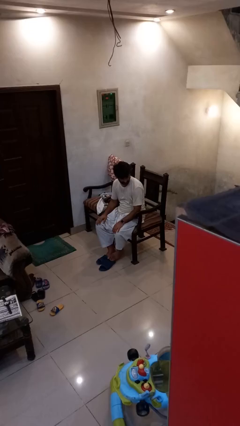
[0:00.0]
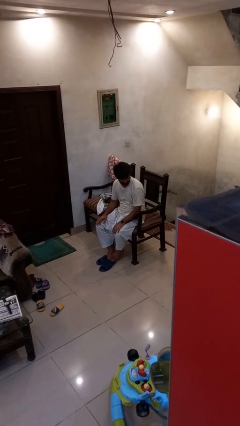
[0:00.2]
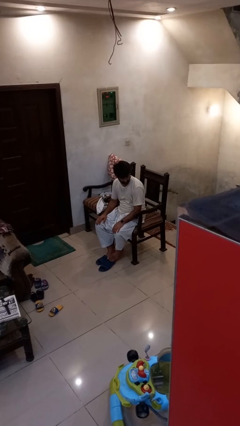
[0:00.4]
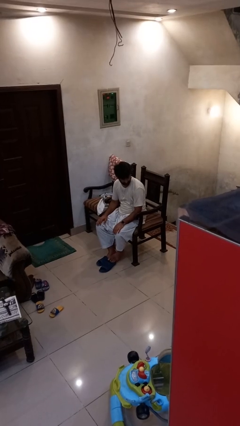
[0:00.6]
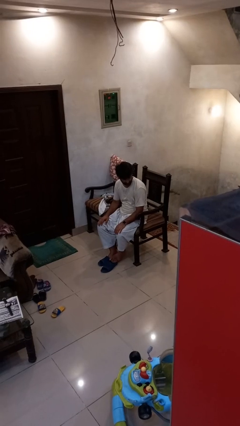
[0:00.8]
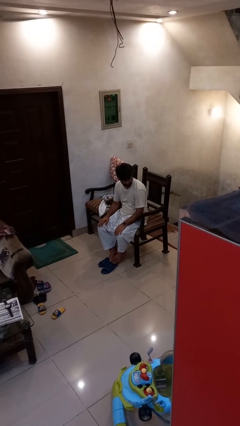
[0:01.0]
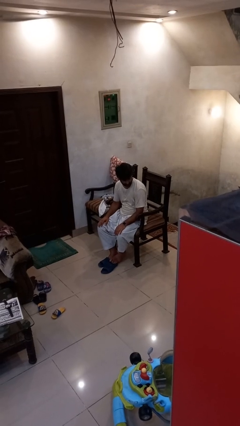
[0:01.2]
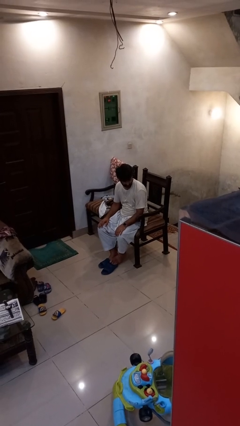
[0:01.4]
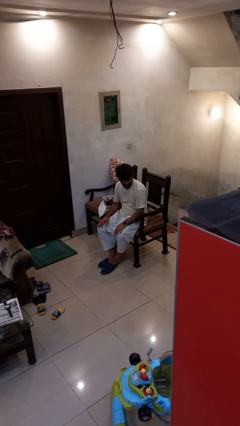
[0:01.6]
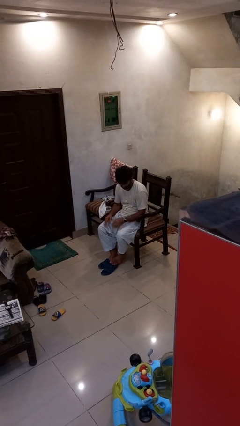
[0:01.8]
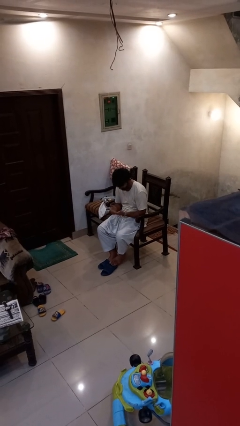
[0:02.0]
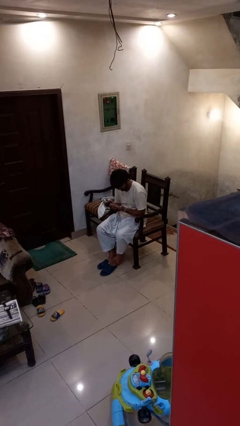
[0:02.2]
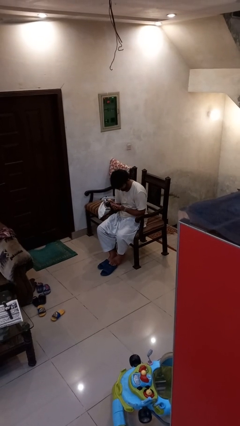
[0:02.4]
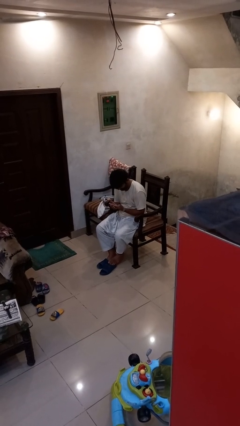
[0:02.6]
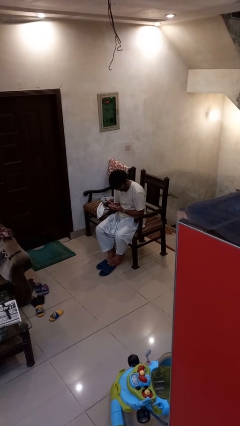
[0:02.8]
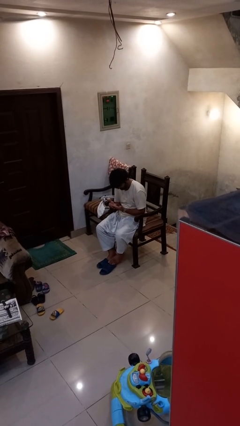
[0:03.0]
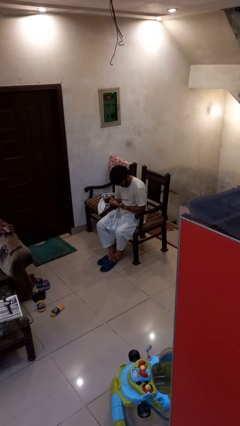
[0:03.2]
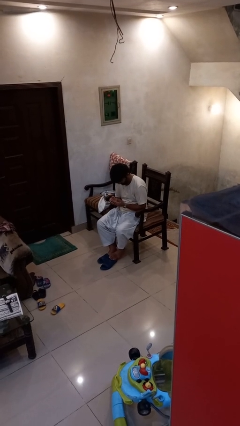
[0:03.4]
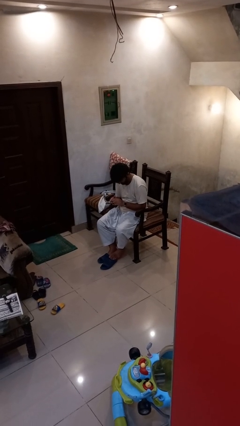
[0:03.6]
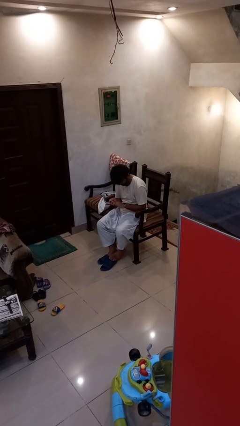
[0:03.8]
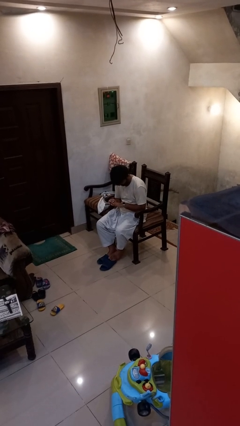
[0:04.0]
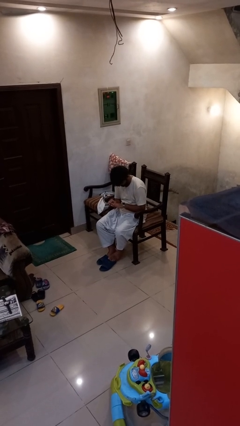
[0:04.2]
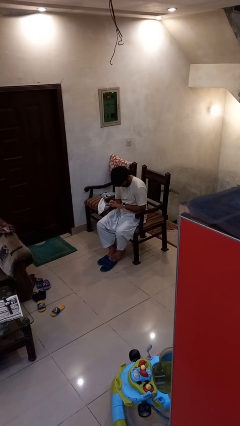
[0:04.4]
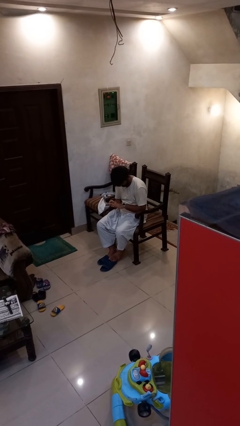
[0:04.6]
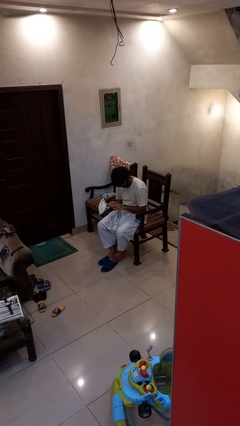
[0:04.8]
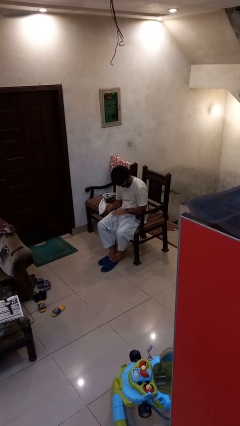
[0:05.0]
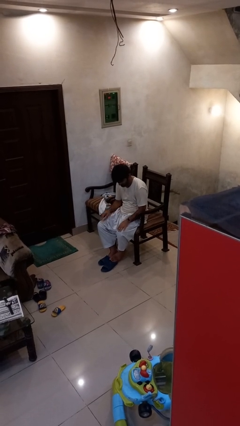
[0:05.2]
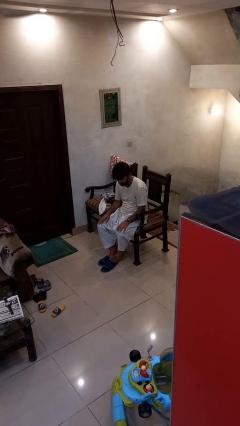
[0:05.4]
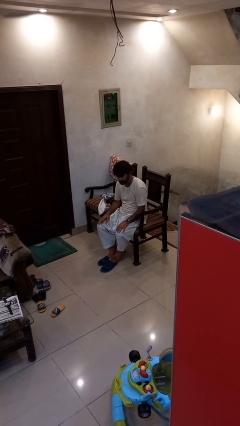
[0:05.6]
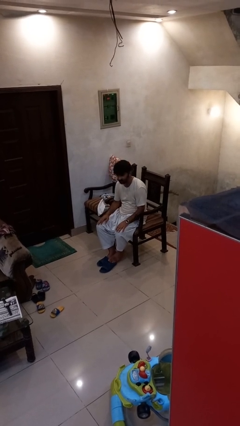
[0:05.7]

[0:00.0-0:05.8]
person looks at hands in lap

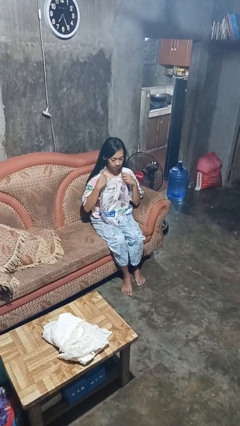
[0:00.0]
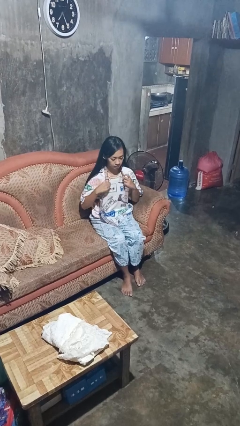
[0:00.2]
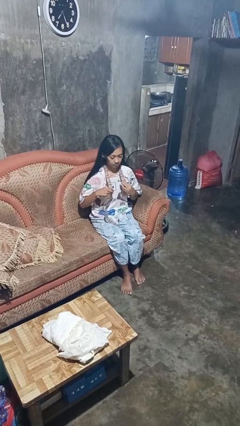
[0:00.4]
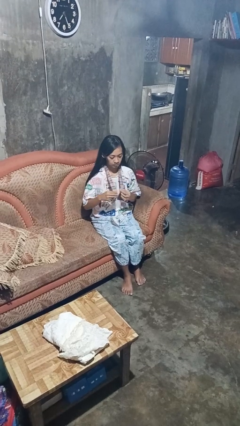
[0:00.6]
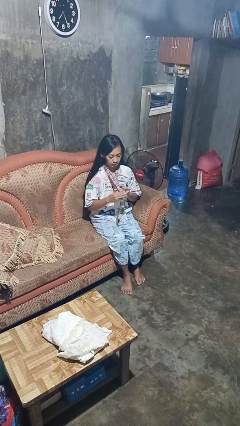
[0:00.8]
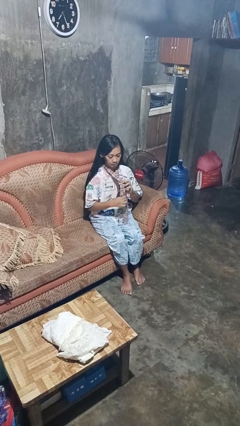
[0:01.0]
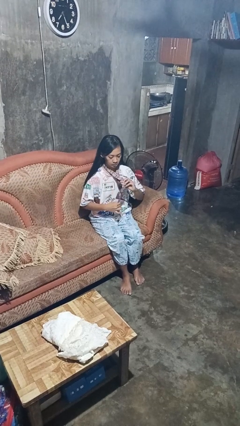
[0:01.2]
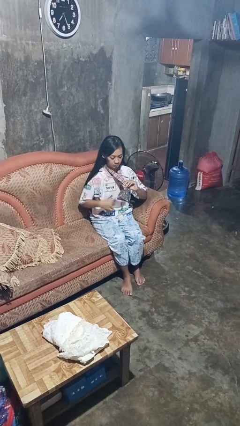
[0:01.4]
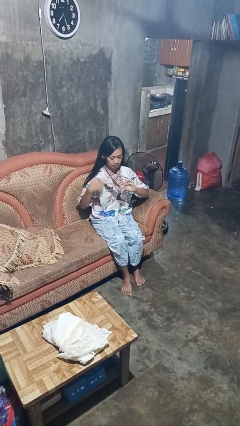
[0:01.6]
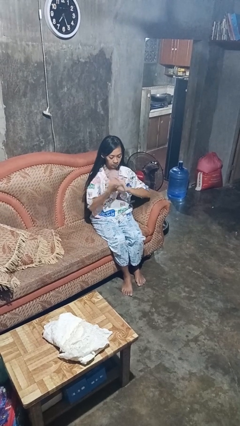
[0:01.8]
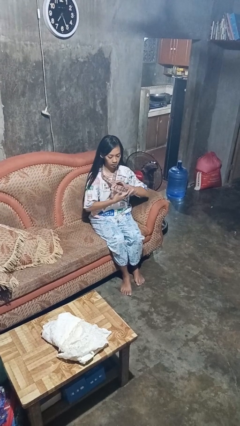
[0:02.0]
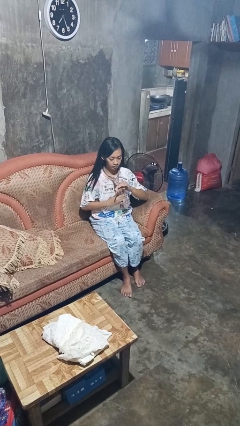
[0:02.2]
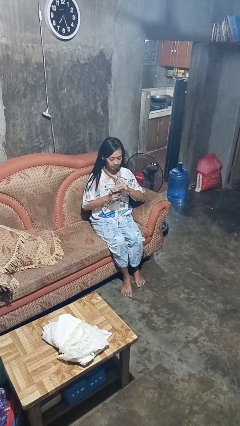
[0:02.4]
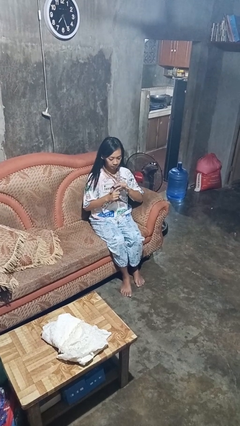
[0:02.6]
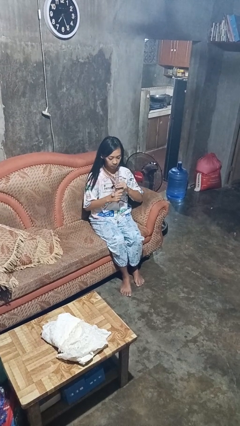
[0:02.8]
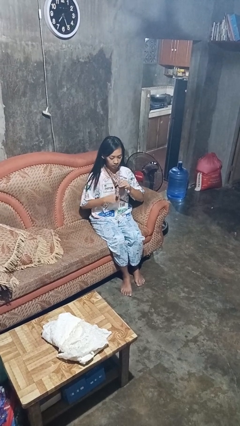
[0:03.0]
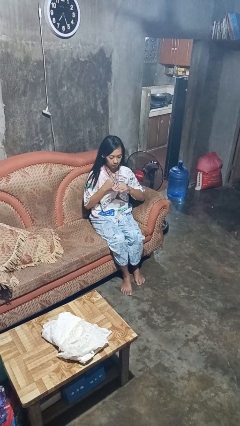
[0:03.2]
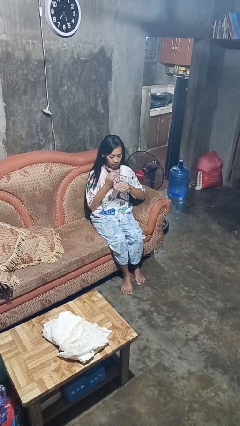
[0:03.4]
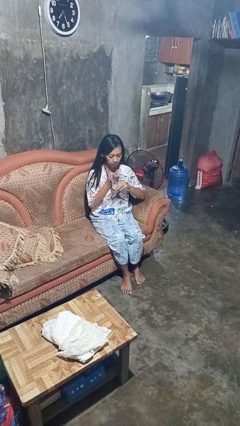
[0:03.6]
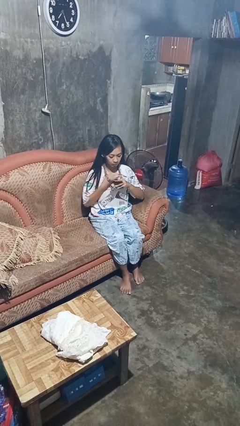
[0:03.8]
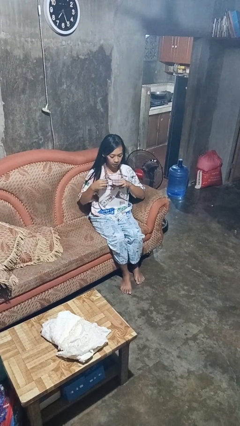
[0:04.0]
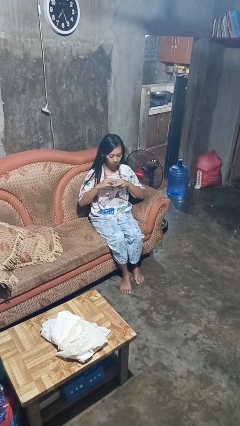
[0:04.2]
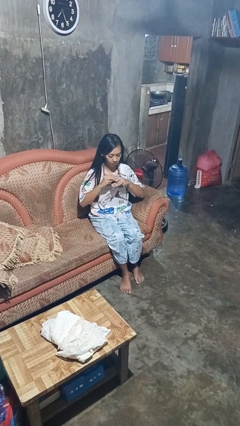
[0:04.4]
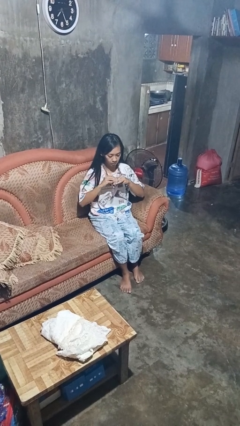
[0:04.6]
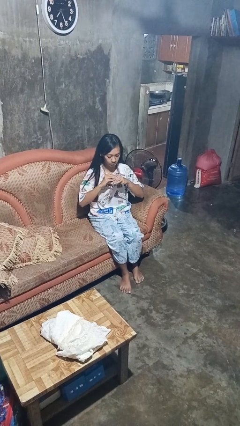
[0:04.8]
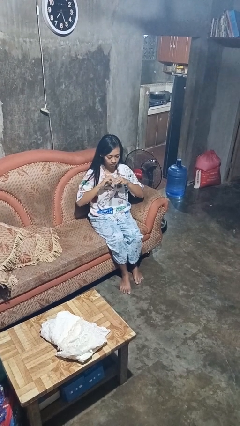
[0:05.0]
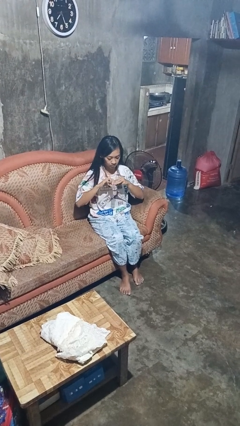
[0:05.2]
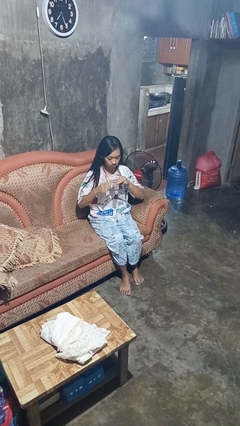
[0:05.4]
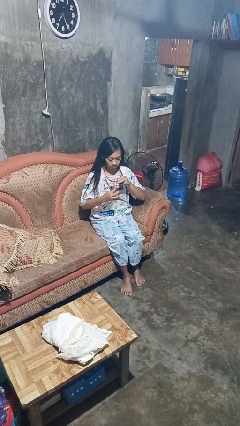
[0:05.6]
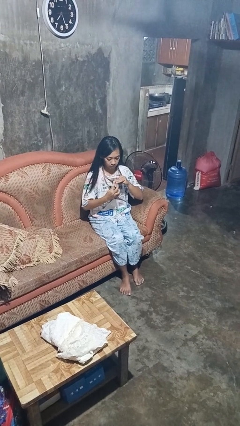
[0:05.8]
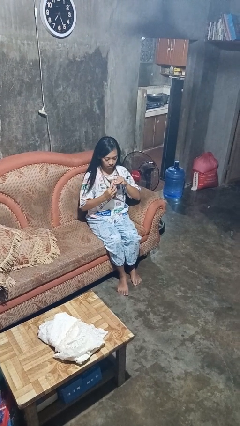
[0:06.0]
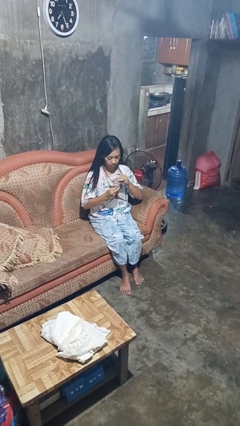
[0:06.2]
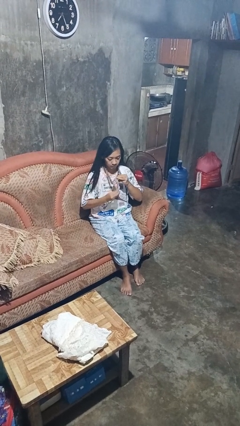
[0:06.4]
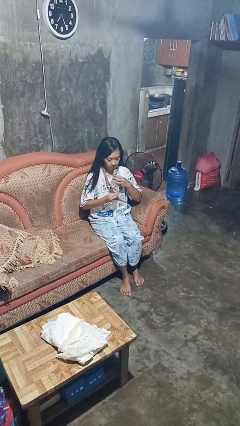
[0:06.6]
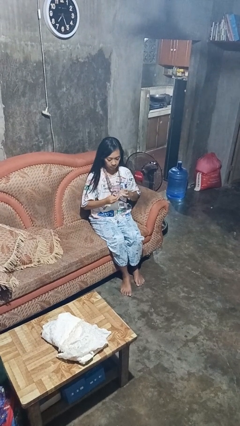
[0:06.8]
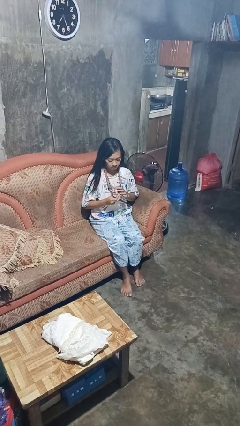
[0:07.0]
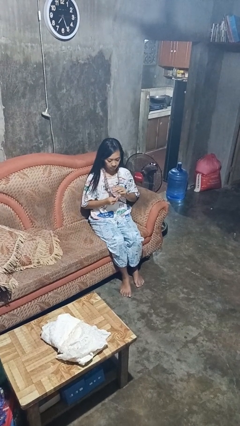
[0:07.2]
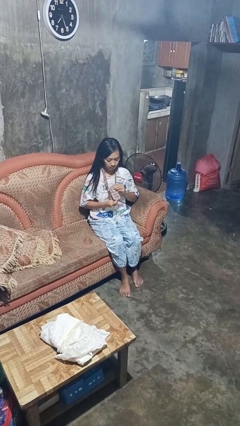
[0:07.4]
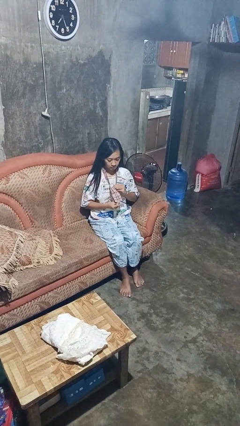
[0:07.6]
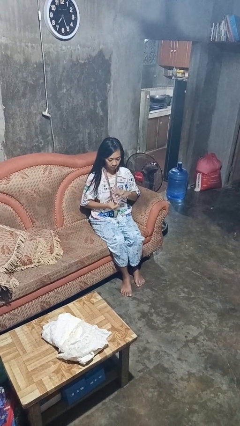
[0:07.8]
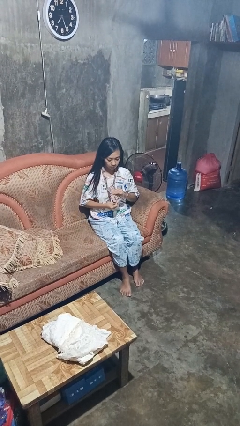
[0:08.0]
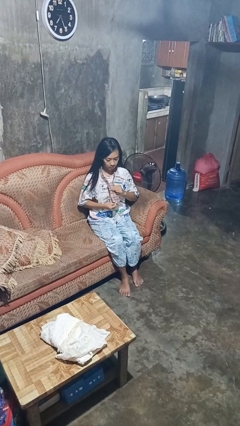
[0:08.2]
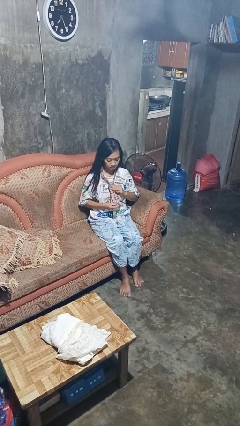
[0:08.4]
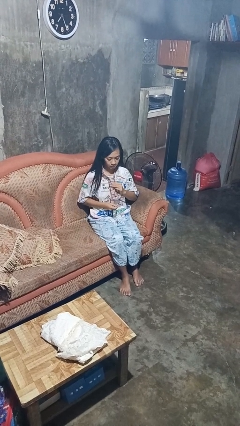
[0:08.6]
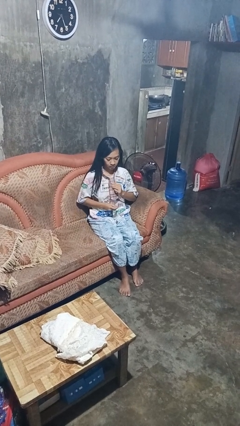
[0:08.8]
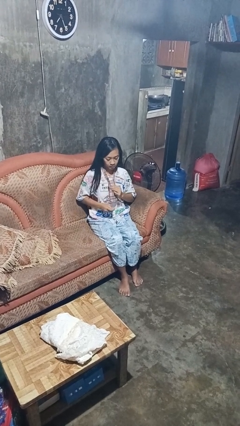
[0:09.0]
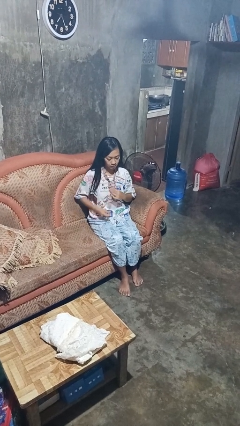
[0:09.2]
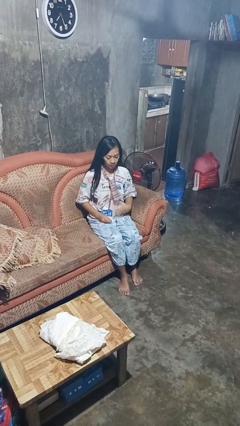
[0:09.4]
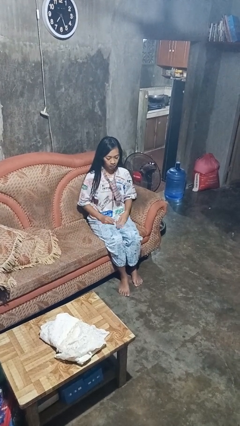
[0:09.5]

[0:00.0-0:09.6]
person puts on necktie

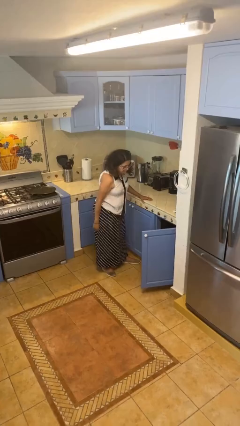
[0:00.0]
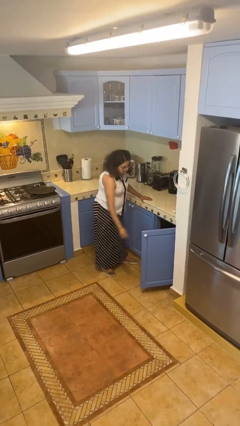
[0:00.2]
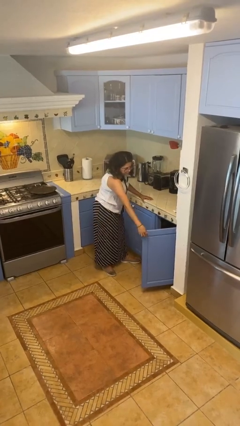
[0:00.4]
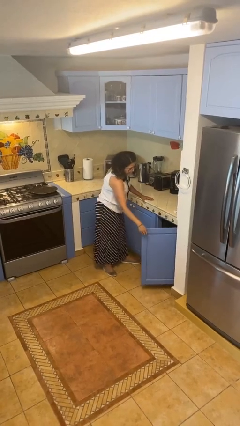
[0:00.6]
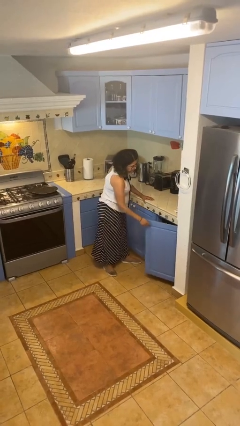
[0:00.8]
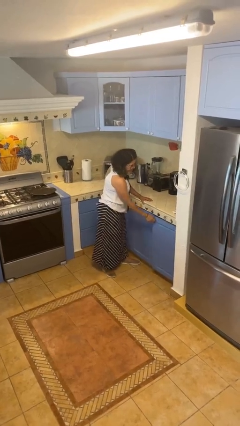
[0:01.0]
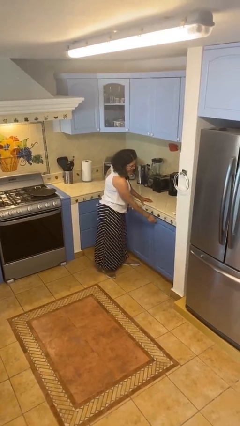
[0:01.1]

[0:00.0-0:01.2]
person closes cabinet

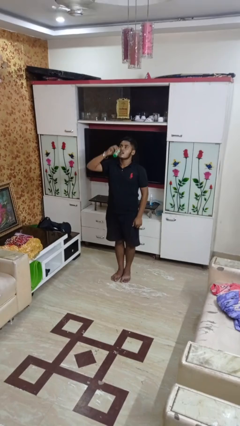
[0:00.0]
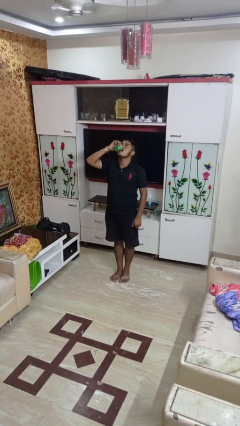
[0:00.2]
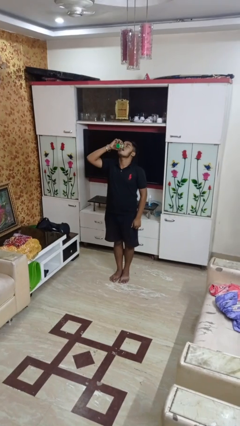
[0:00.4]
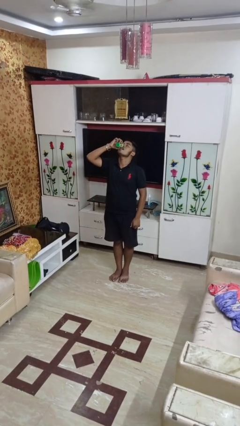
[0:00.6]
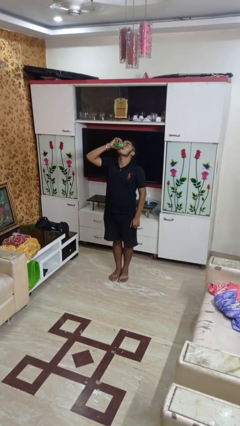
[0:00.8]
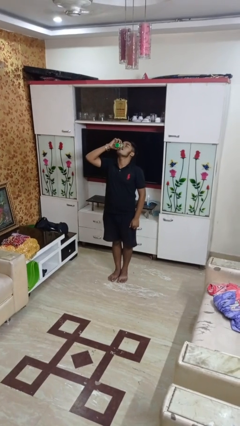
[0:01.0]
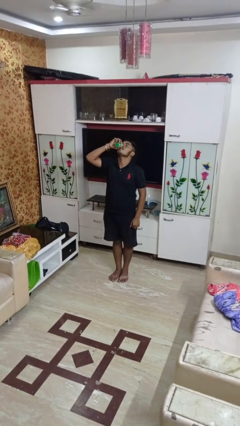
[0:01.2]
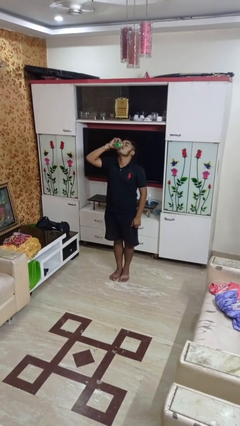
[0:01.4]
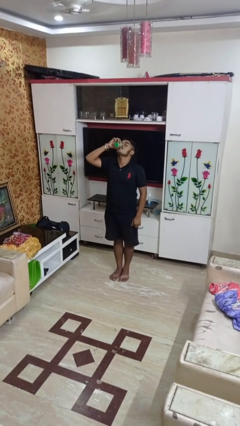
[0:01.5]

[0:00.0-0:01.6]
person drinks from beverage can
